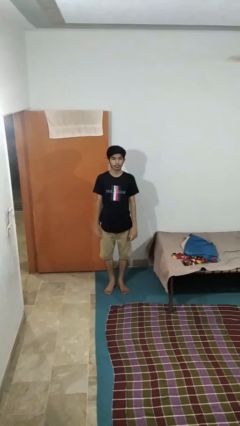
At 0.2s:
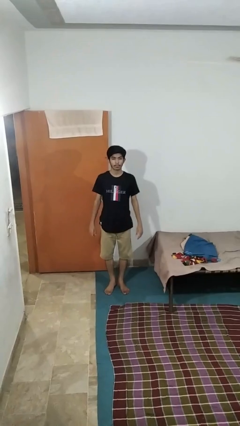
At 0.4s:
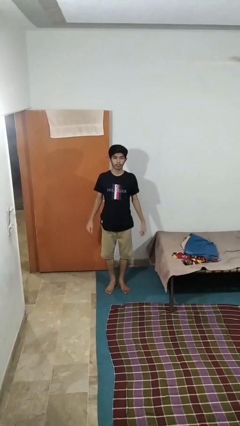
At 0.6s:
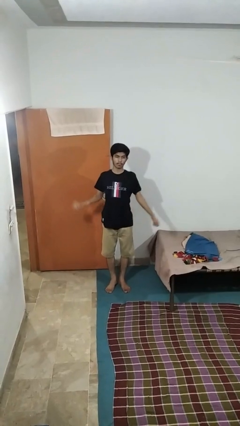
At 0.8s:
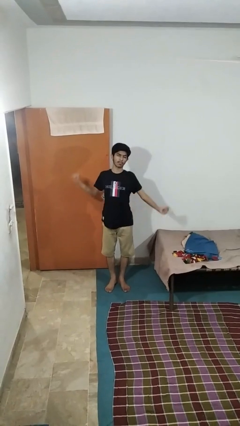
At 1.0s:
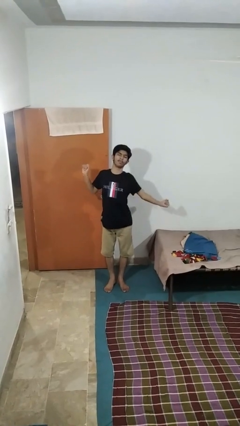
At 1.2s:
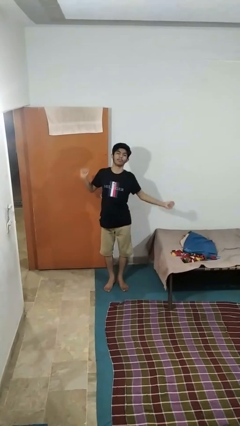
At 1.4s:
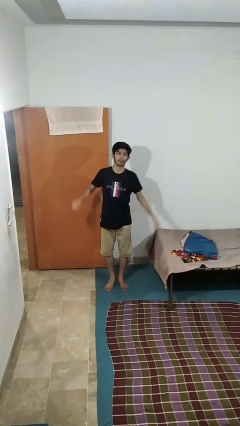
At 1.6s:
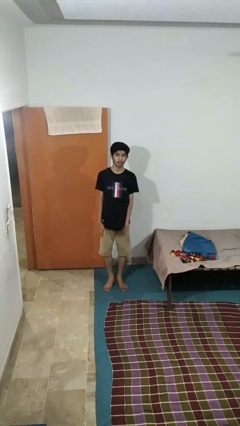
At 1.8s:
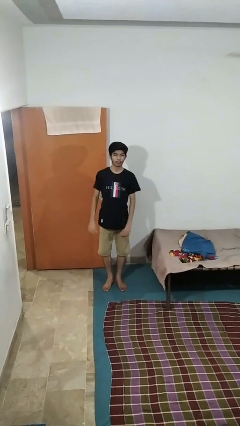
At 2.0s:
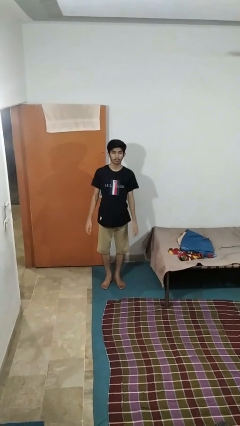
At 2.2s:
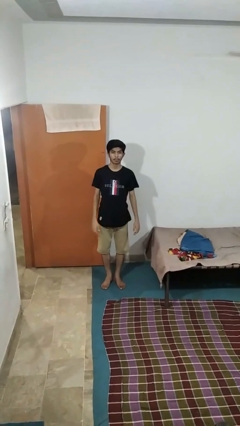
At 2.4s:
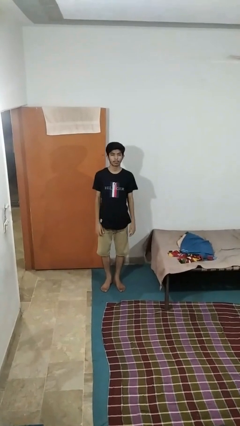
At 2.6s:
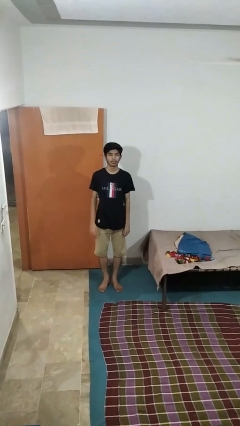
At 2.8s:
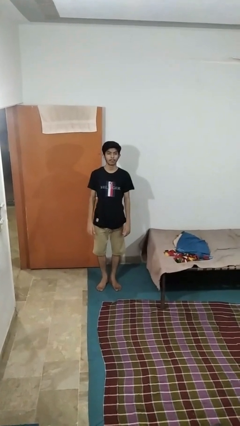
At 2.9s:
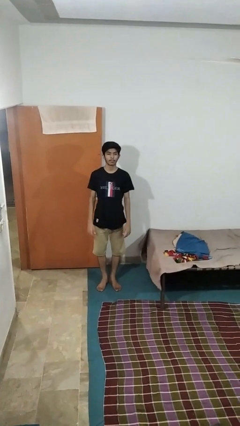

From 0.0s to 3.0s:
person stretches arms to side

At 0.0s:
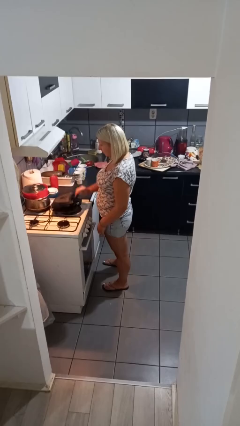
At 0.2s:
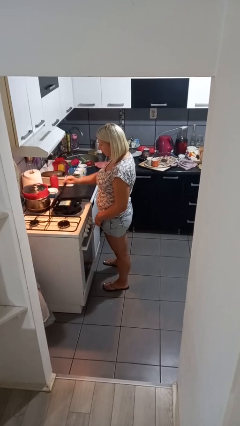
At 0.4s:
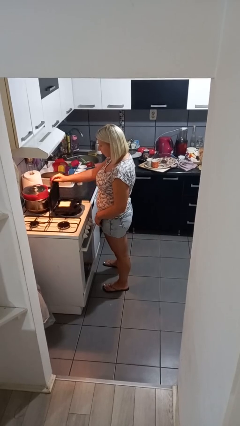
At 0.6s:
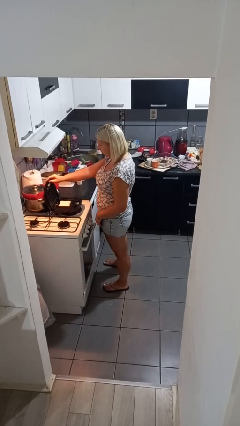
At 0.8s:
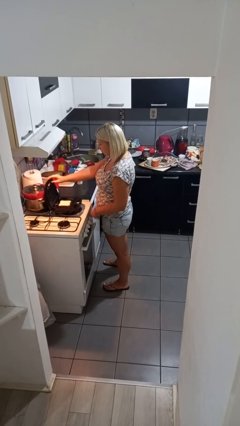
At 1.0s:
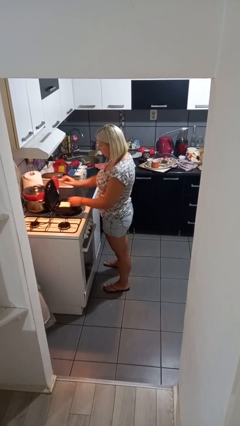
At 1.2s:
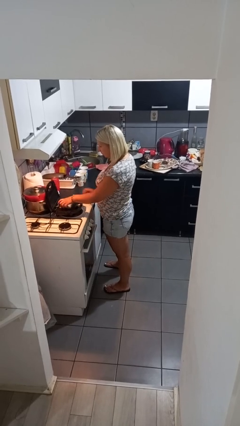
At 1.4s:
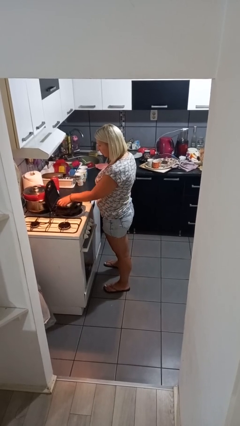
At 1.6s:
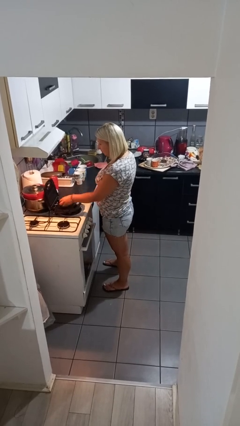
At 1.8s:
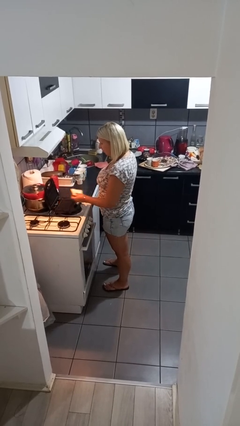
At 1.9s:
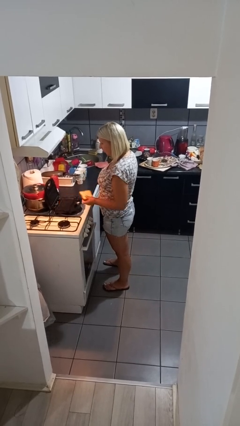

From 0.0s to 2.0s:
person takes object from toaster

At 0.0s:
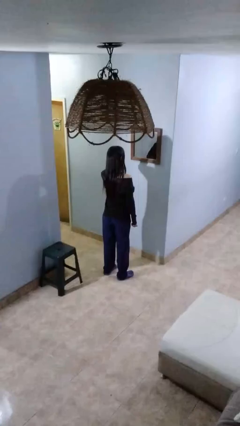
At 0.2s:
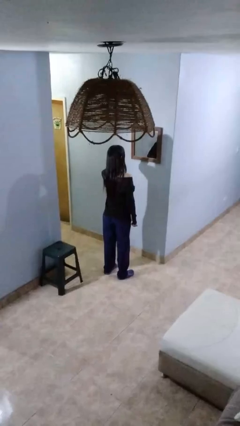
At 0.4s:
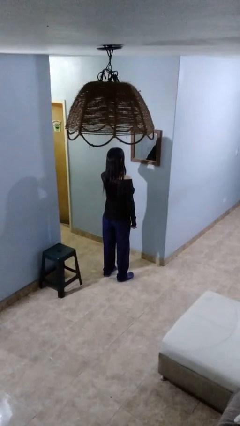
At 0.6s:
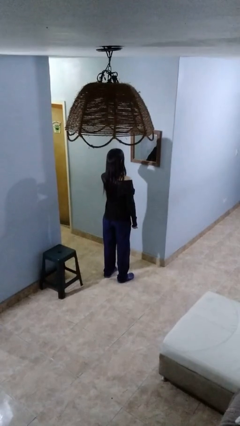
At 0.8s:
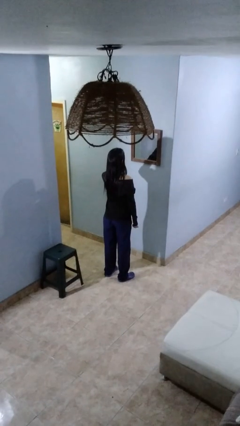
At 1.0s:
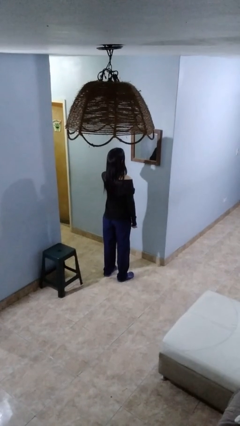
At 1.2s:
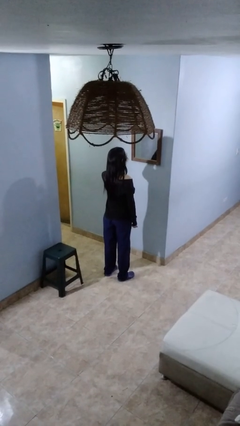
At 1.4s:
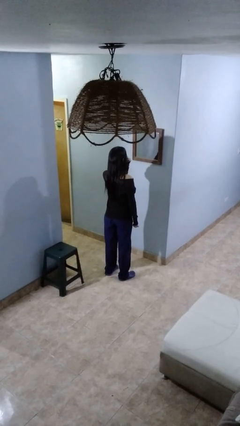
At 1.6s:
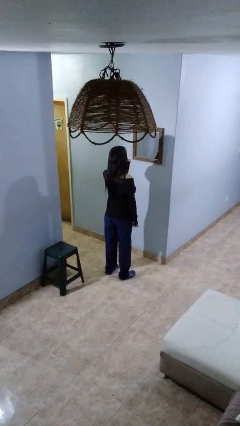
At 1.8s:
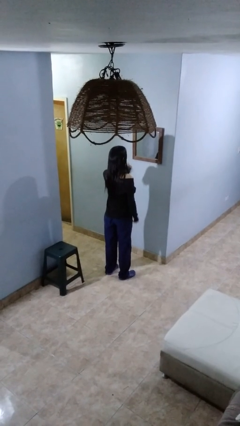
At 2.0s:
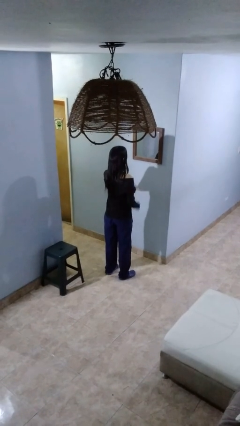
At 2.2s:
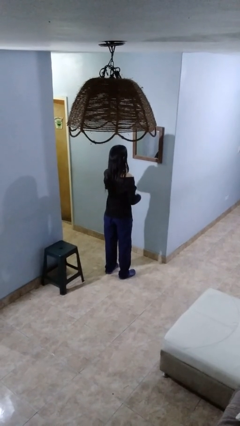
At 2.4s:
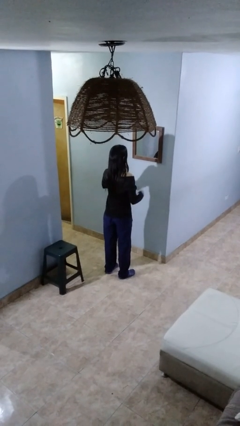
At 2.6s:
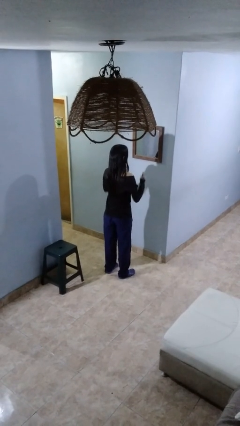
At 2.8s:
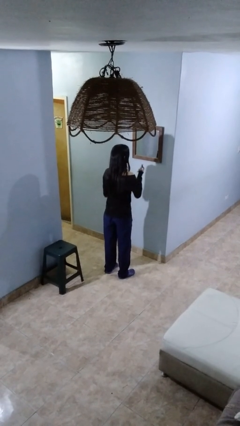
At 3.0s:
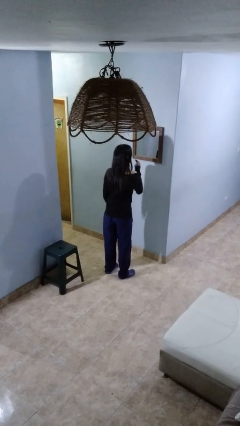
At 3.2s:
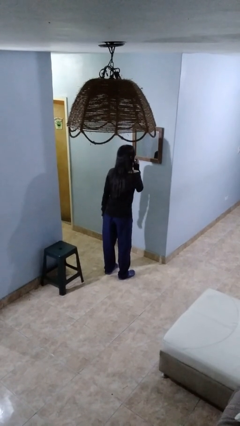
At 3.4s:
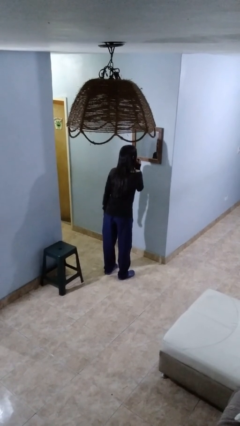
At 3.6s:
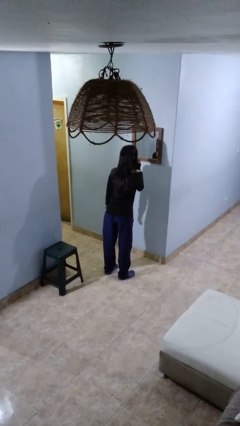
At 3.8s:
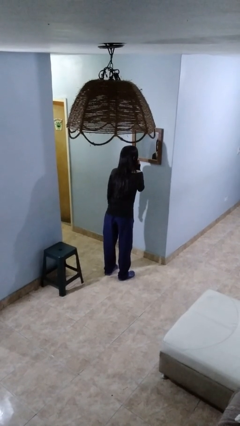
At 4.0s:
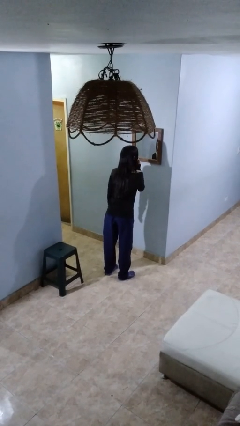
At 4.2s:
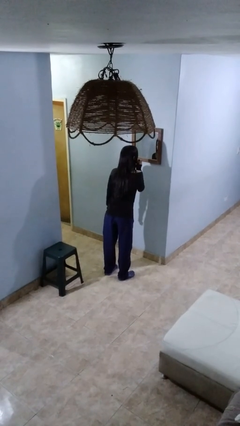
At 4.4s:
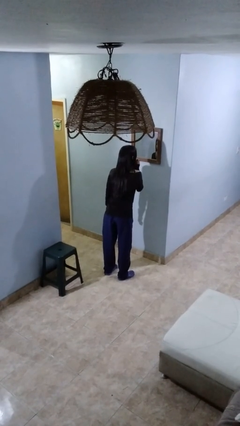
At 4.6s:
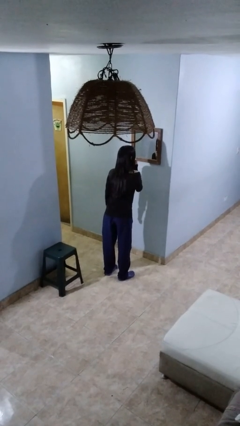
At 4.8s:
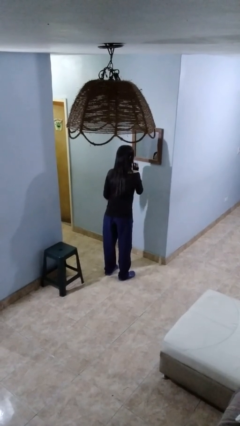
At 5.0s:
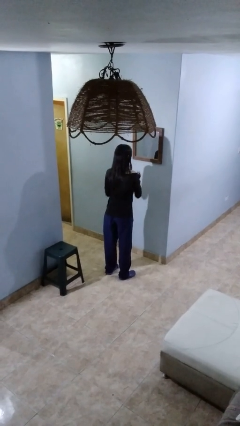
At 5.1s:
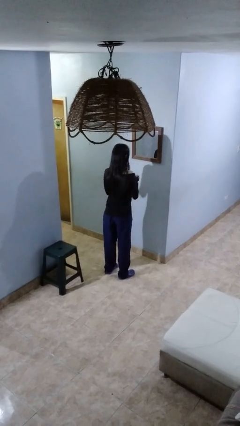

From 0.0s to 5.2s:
person applies lip makeup

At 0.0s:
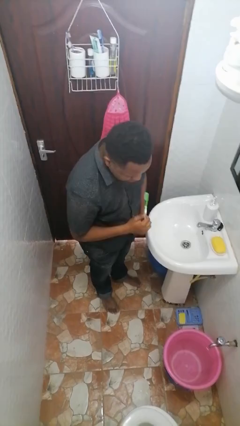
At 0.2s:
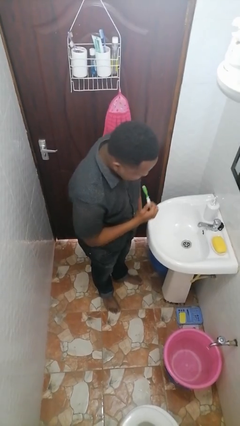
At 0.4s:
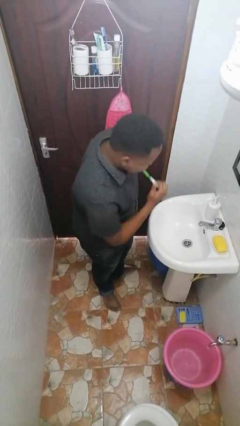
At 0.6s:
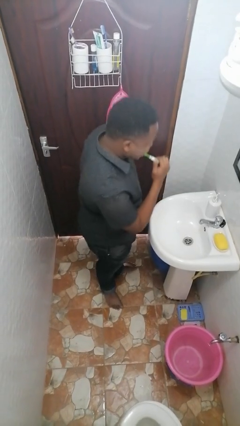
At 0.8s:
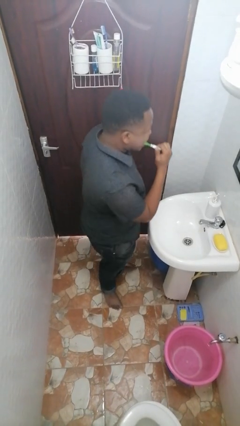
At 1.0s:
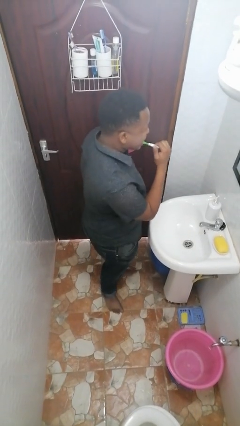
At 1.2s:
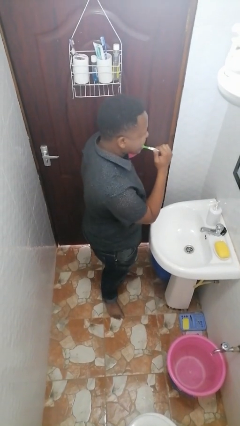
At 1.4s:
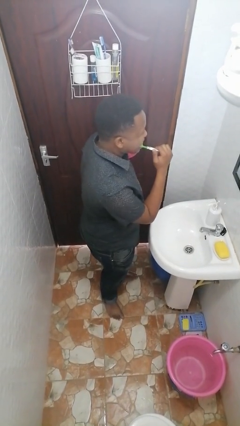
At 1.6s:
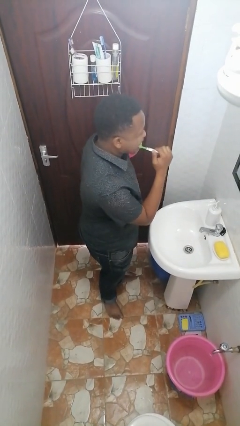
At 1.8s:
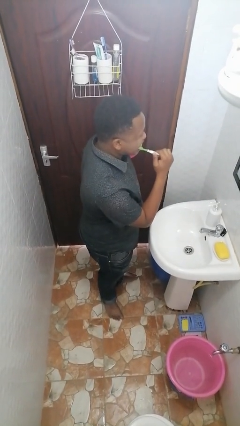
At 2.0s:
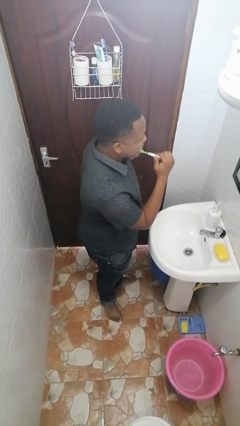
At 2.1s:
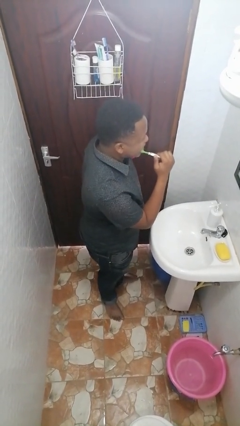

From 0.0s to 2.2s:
person brushes teeth

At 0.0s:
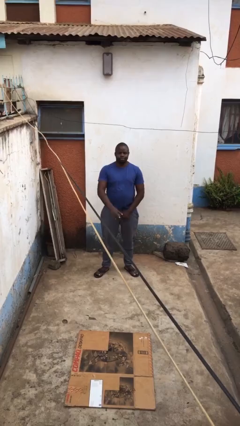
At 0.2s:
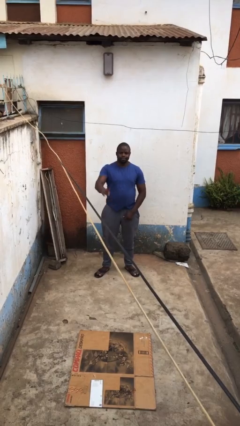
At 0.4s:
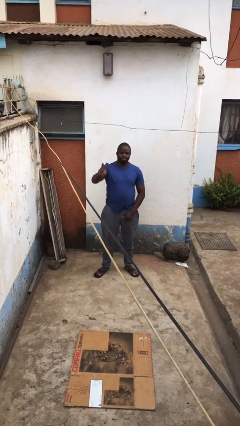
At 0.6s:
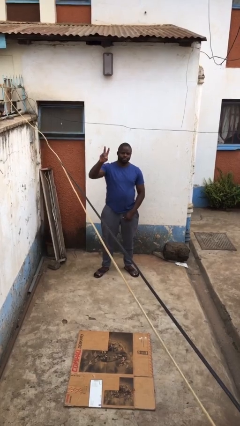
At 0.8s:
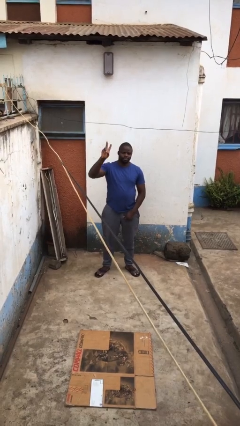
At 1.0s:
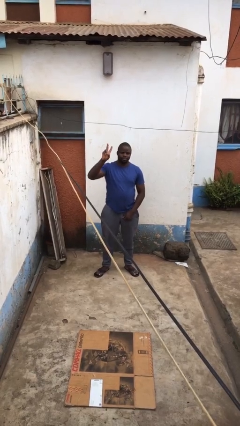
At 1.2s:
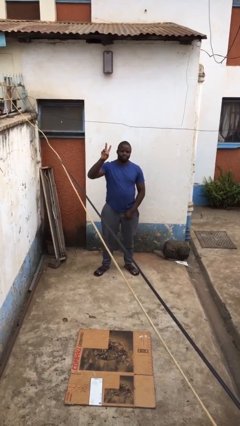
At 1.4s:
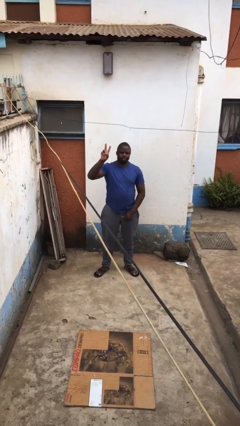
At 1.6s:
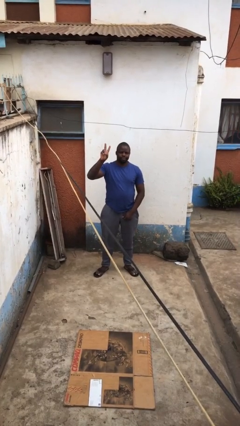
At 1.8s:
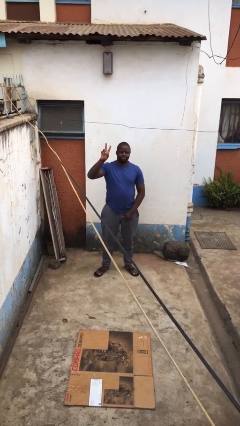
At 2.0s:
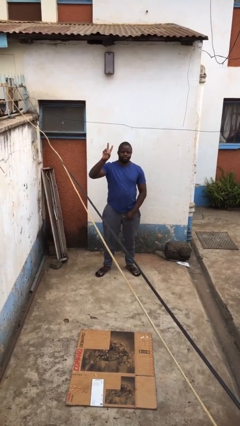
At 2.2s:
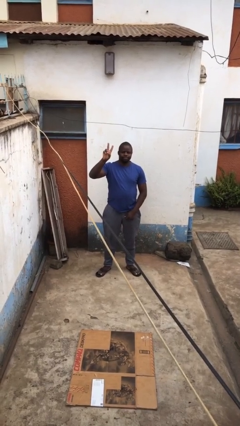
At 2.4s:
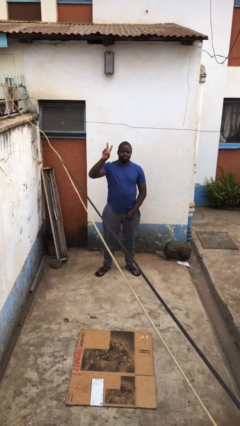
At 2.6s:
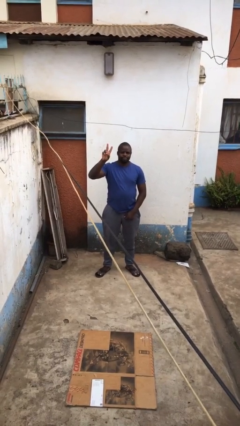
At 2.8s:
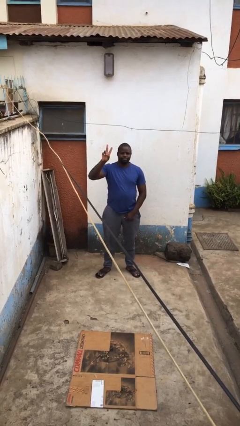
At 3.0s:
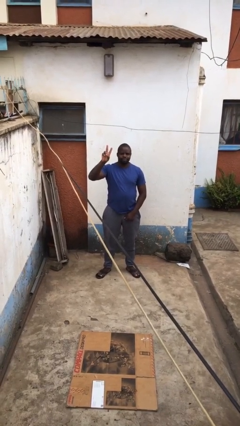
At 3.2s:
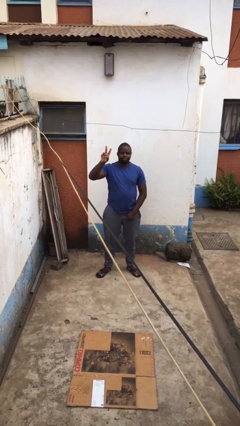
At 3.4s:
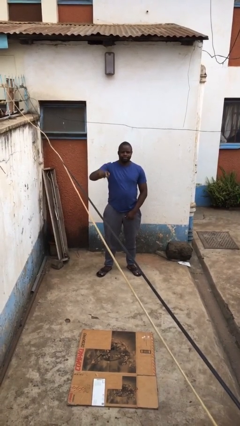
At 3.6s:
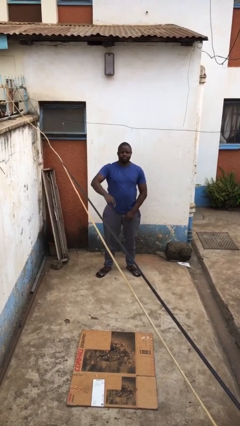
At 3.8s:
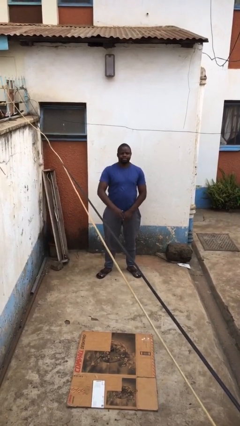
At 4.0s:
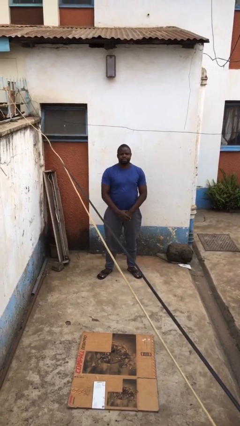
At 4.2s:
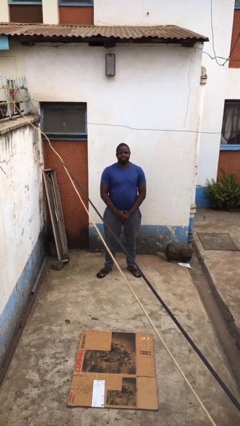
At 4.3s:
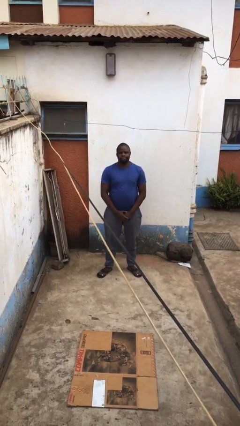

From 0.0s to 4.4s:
person gestures peace

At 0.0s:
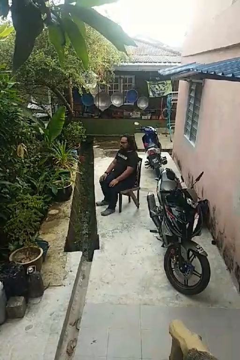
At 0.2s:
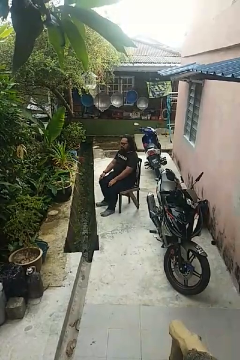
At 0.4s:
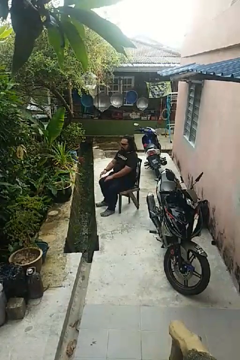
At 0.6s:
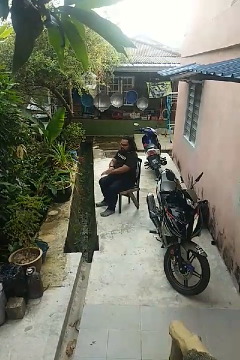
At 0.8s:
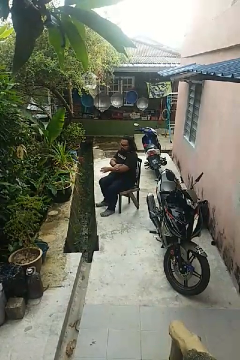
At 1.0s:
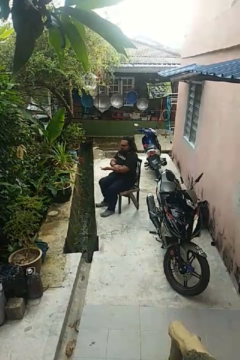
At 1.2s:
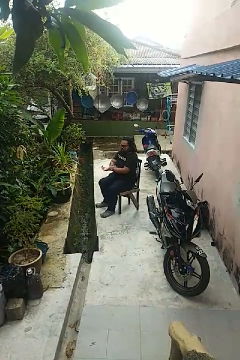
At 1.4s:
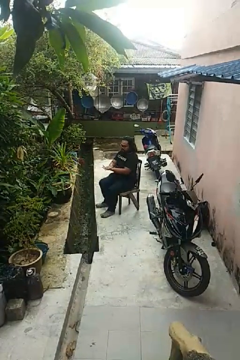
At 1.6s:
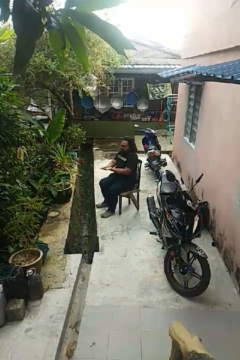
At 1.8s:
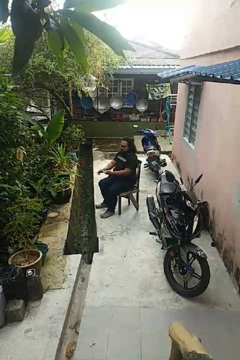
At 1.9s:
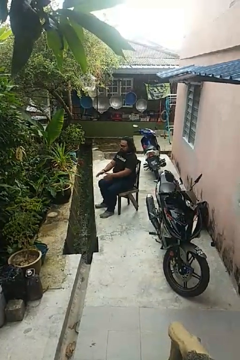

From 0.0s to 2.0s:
person looks at hands in lap
